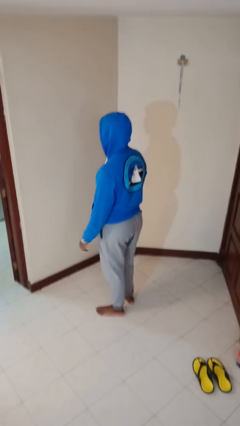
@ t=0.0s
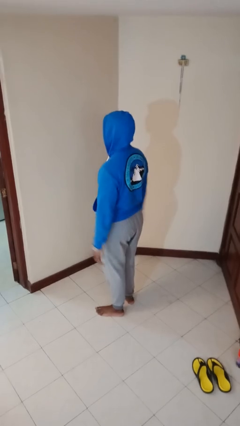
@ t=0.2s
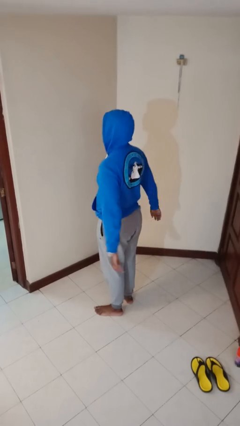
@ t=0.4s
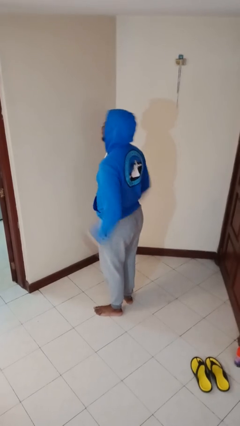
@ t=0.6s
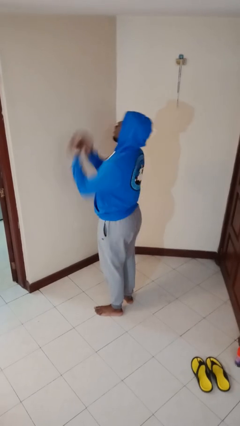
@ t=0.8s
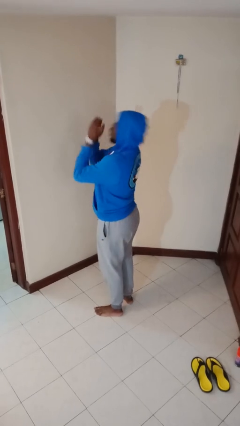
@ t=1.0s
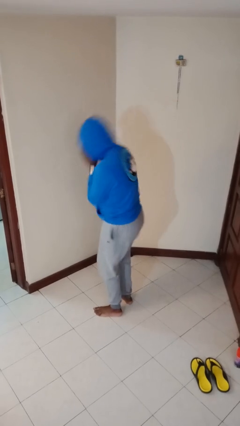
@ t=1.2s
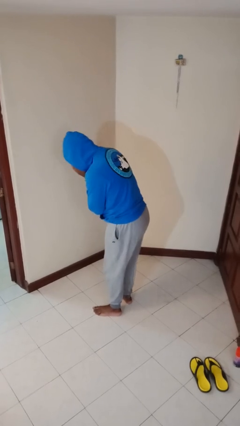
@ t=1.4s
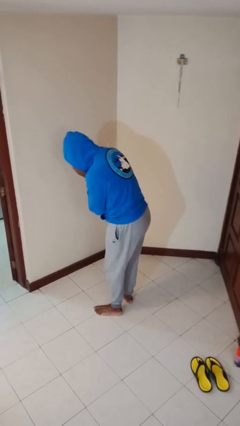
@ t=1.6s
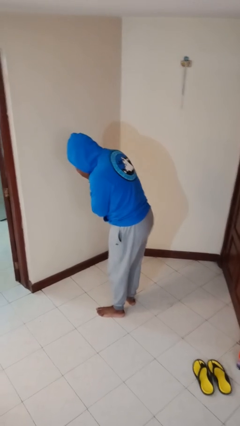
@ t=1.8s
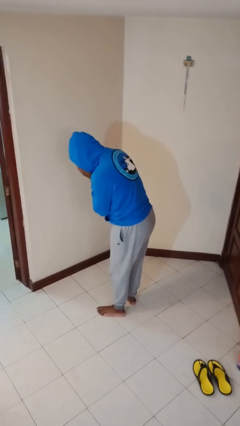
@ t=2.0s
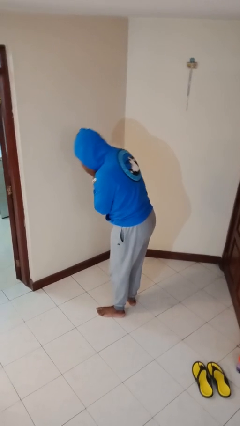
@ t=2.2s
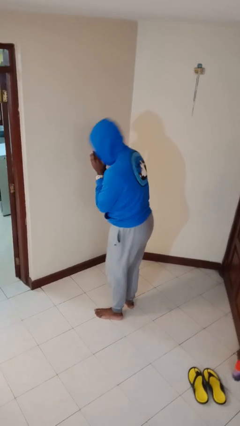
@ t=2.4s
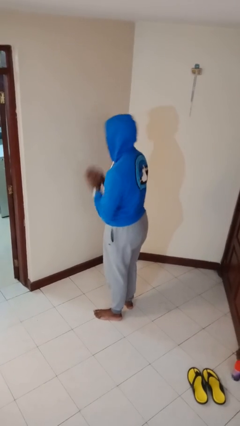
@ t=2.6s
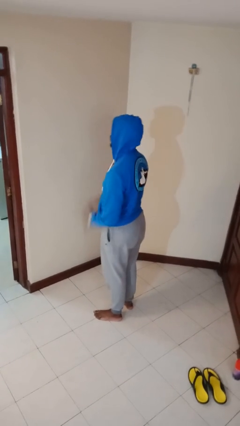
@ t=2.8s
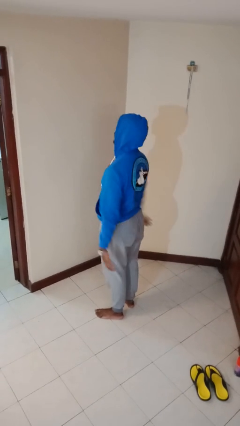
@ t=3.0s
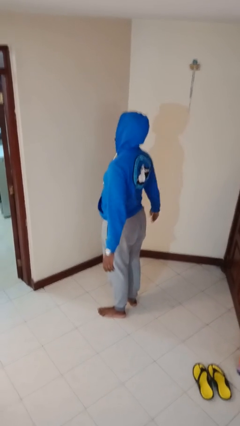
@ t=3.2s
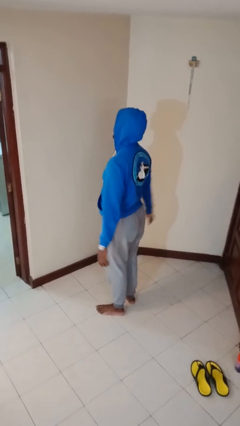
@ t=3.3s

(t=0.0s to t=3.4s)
person sneezes into hand

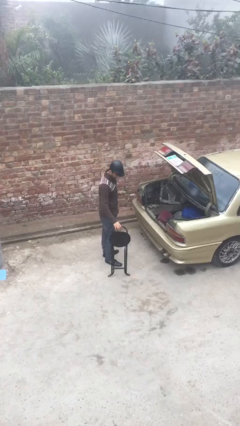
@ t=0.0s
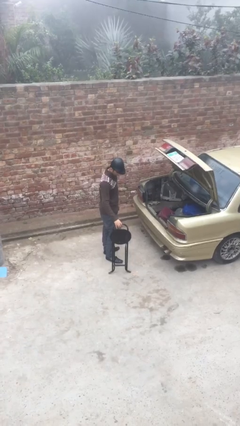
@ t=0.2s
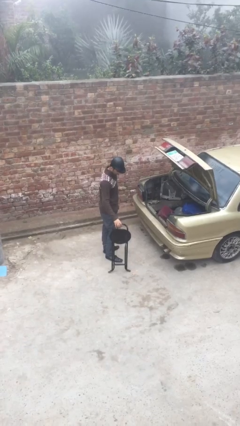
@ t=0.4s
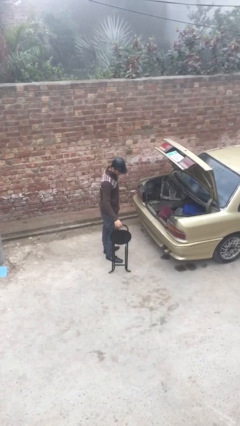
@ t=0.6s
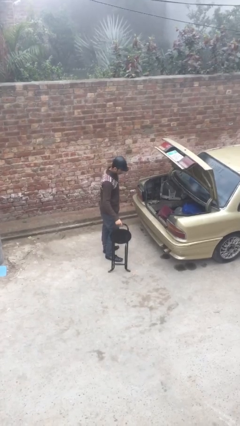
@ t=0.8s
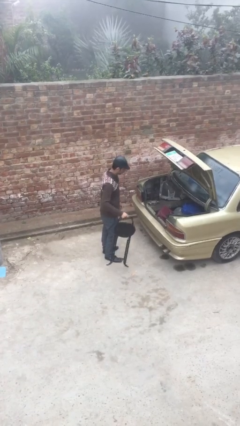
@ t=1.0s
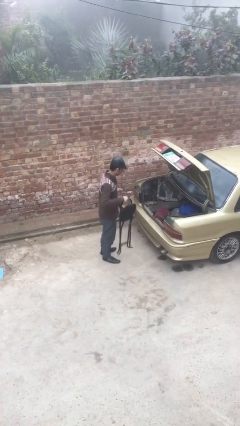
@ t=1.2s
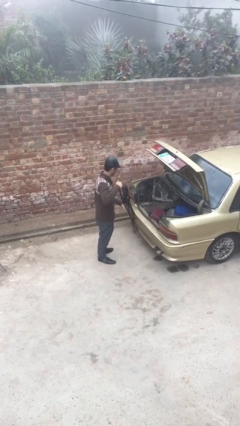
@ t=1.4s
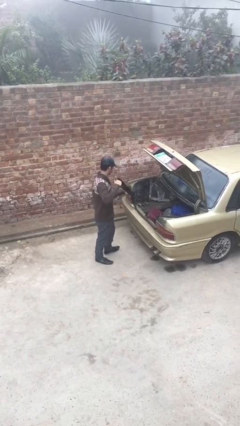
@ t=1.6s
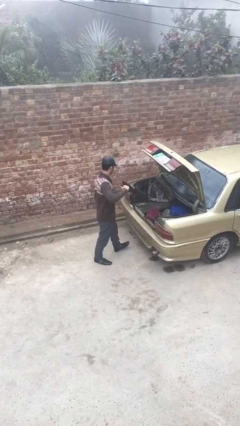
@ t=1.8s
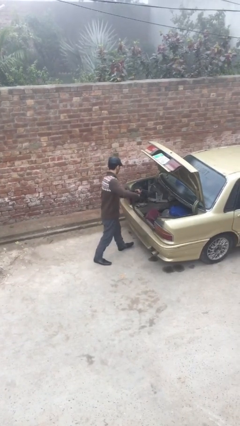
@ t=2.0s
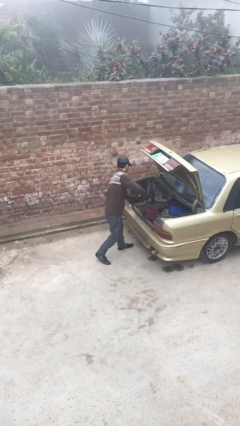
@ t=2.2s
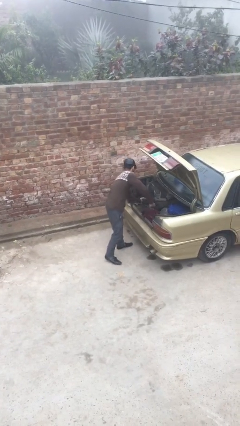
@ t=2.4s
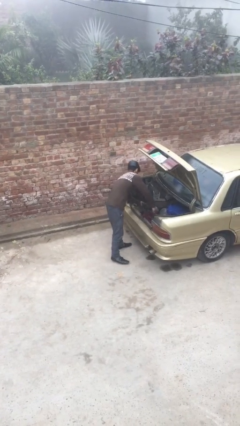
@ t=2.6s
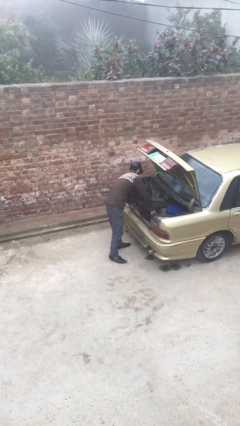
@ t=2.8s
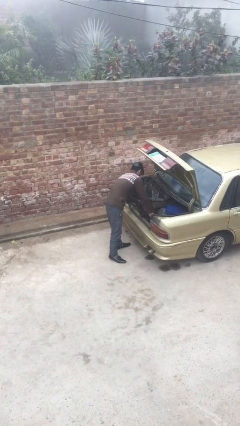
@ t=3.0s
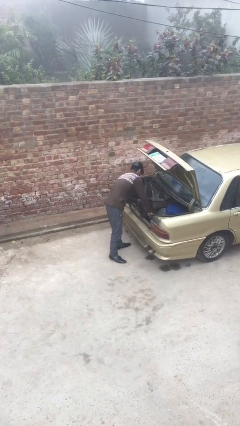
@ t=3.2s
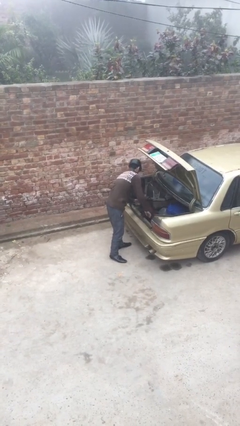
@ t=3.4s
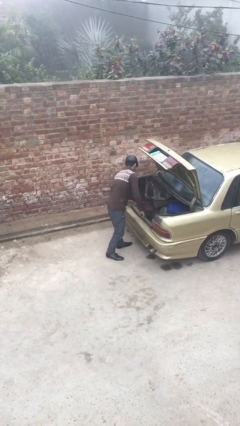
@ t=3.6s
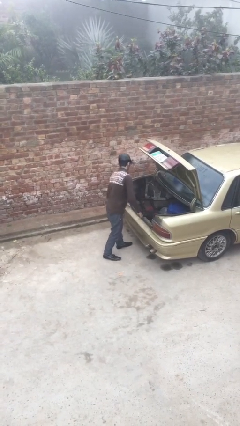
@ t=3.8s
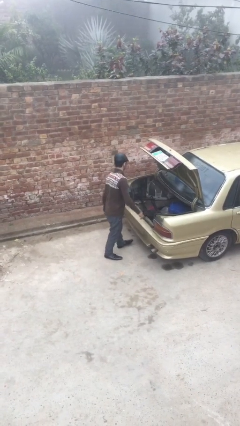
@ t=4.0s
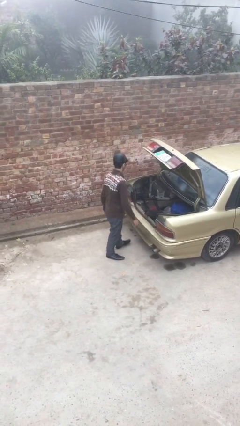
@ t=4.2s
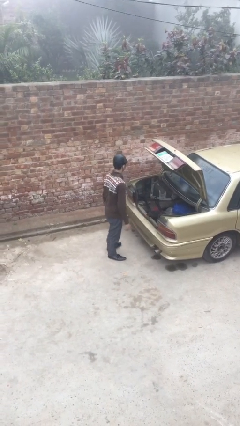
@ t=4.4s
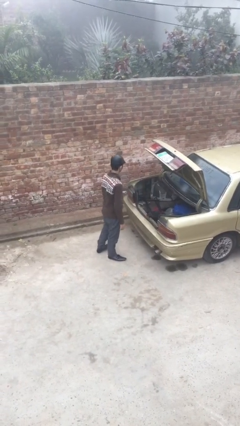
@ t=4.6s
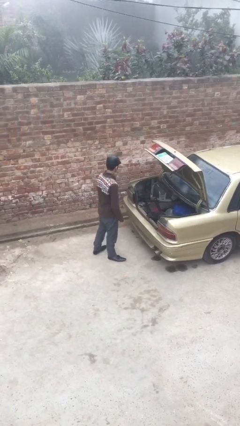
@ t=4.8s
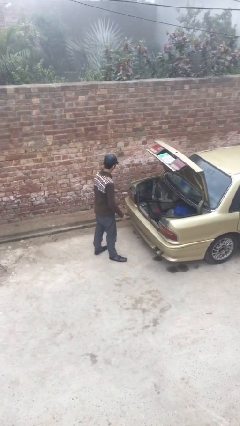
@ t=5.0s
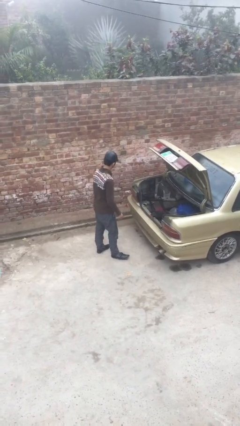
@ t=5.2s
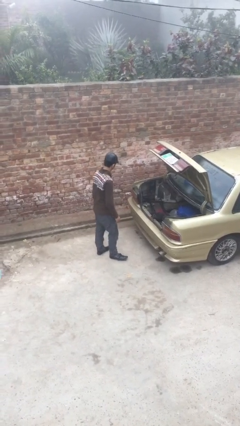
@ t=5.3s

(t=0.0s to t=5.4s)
person loads car

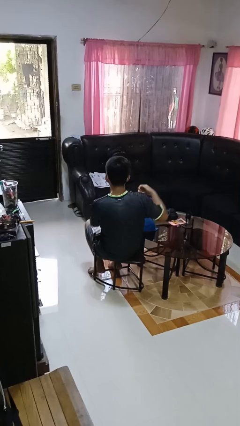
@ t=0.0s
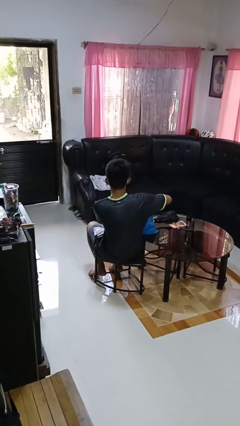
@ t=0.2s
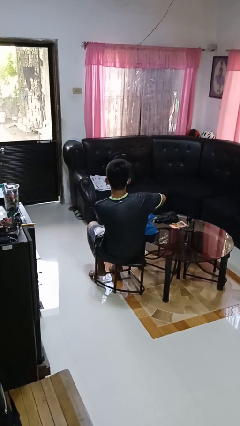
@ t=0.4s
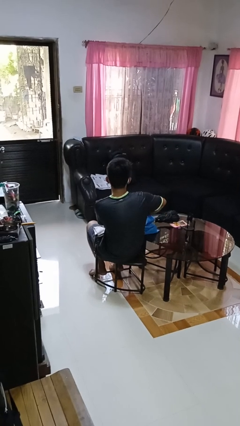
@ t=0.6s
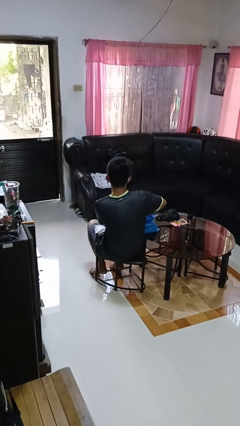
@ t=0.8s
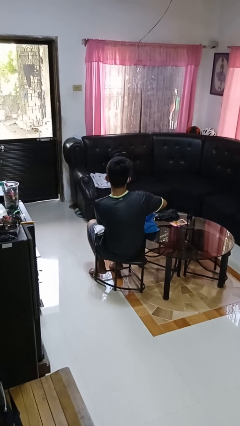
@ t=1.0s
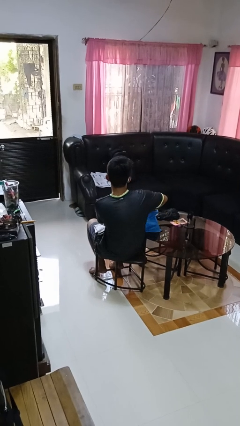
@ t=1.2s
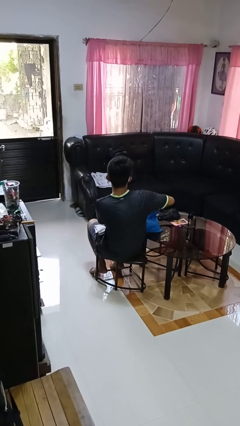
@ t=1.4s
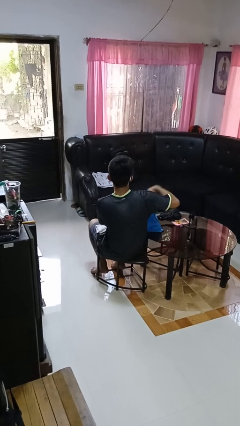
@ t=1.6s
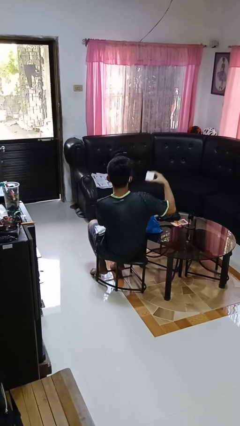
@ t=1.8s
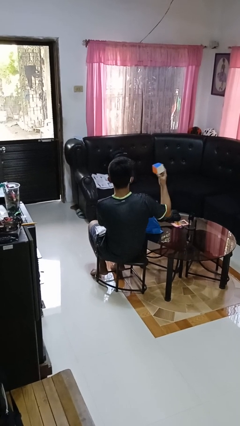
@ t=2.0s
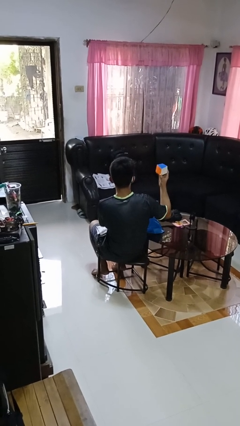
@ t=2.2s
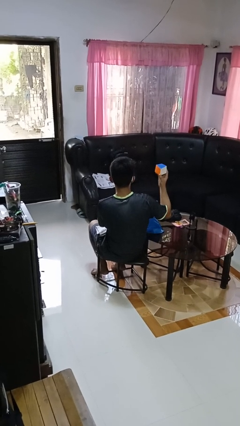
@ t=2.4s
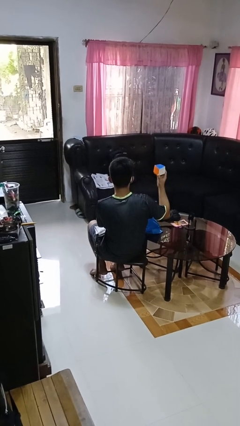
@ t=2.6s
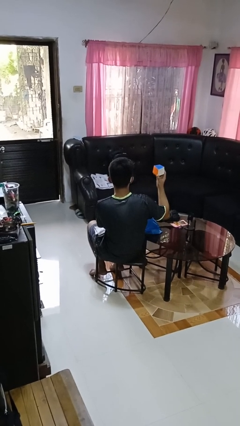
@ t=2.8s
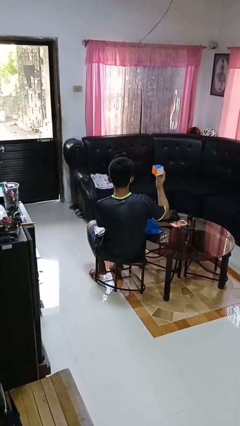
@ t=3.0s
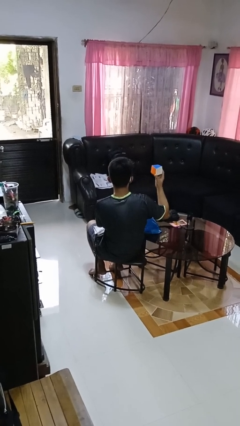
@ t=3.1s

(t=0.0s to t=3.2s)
person takes object from bag

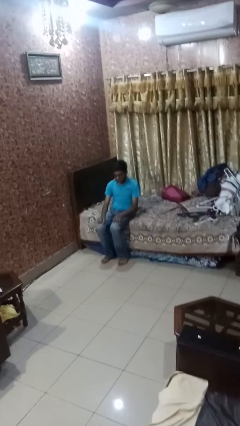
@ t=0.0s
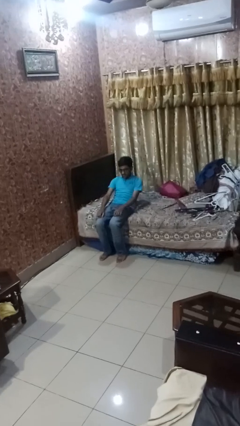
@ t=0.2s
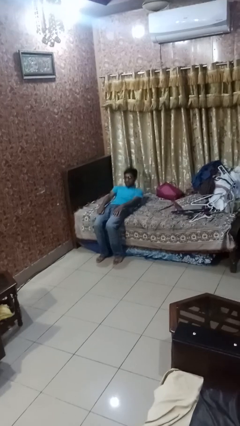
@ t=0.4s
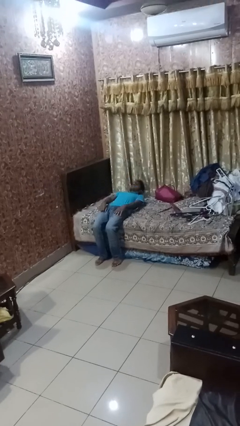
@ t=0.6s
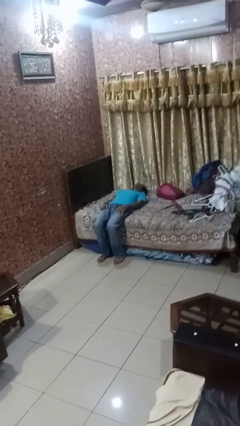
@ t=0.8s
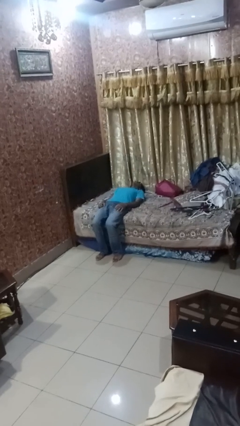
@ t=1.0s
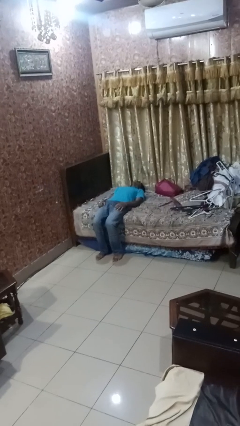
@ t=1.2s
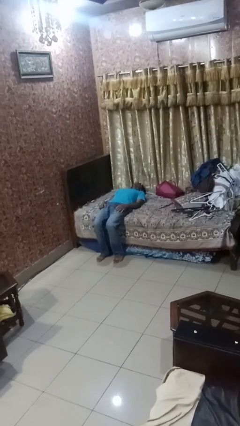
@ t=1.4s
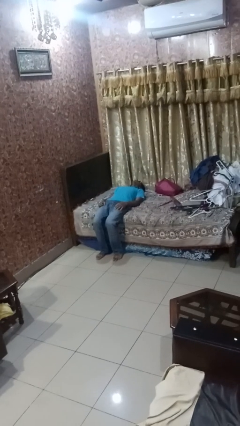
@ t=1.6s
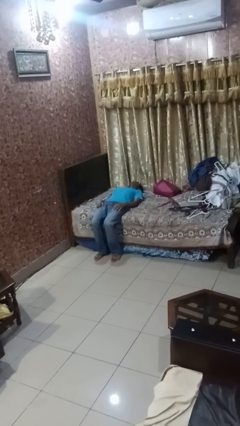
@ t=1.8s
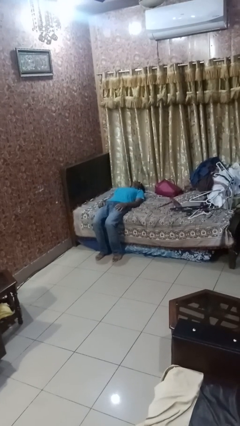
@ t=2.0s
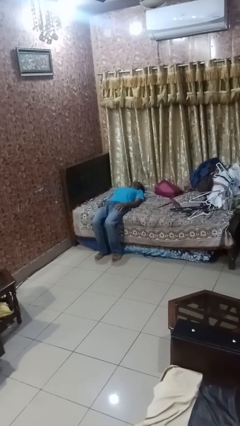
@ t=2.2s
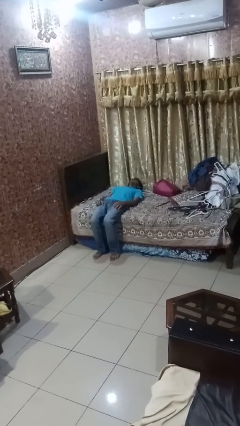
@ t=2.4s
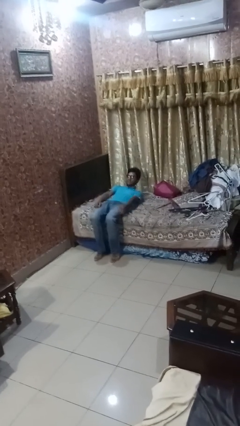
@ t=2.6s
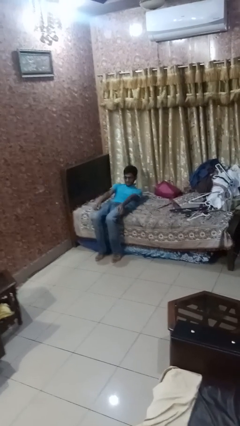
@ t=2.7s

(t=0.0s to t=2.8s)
person lies down on bed

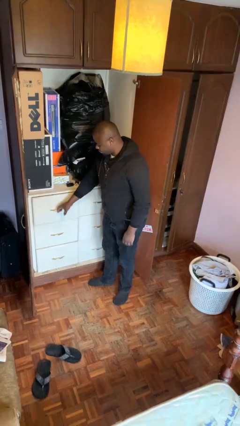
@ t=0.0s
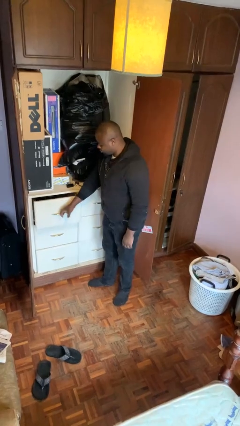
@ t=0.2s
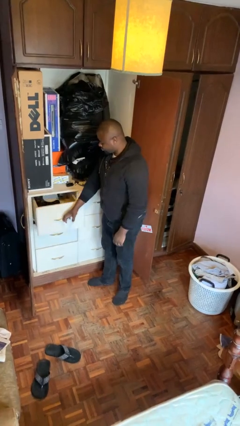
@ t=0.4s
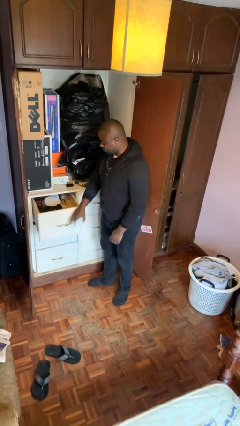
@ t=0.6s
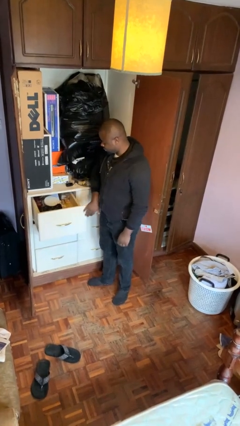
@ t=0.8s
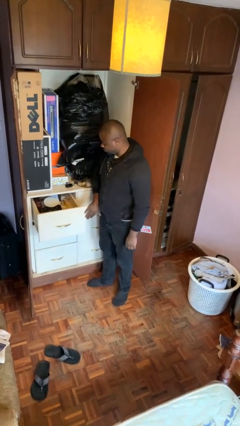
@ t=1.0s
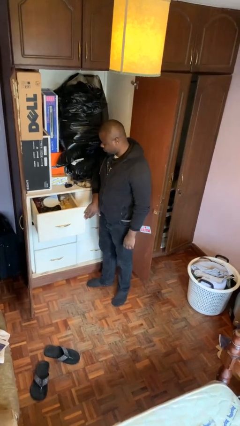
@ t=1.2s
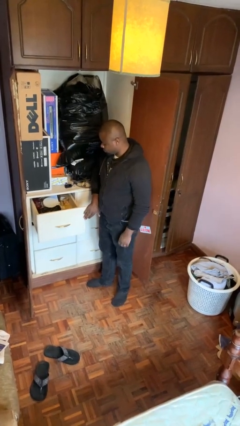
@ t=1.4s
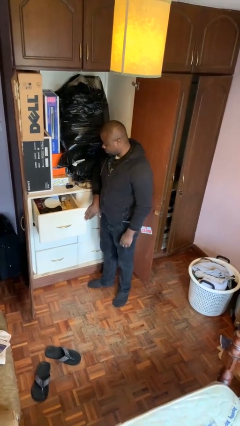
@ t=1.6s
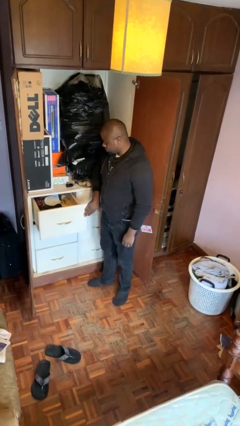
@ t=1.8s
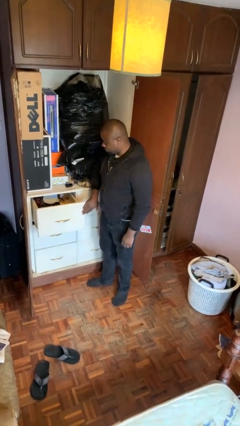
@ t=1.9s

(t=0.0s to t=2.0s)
person opens dresser drawer

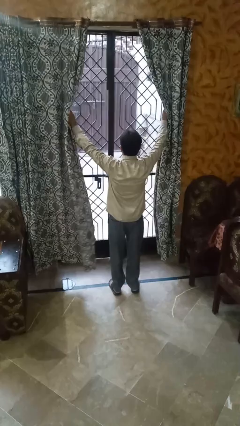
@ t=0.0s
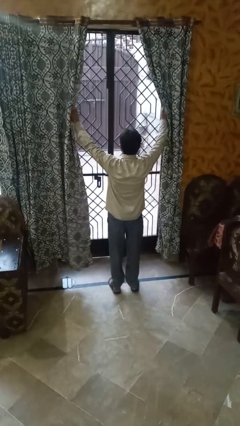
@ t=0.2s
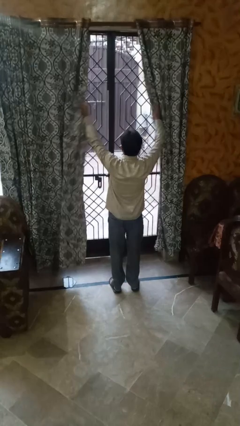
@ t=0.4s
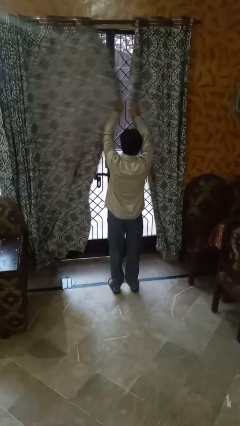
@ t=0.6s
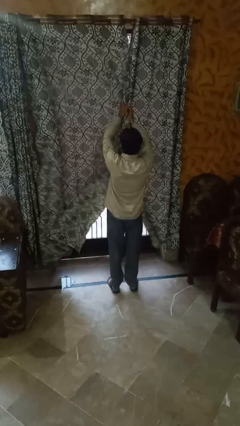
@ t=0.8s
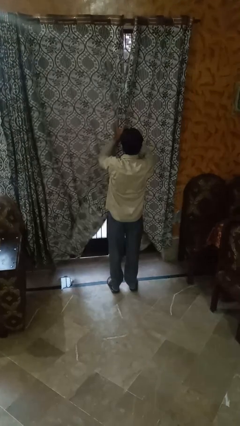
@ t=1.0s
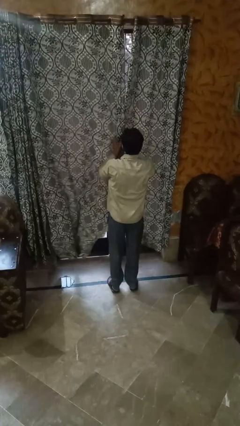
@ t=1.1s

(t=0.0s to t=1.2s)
person closes curtains
